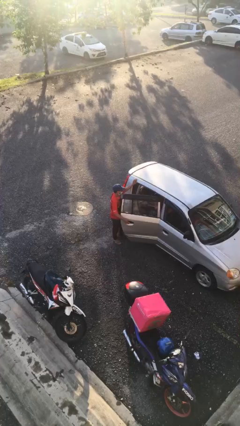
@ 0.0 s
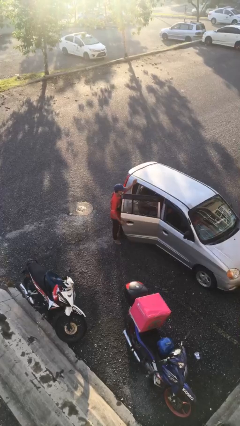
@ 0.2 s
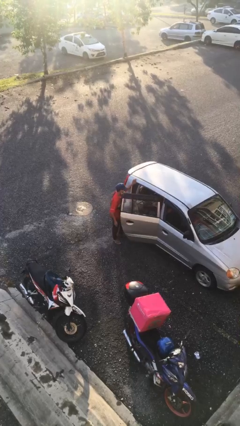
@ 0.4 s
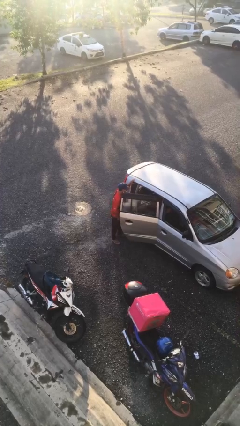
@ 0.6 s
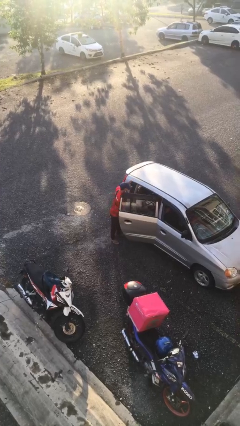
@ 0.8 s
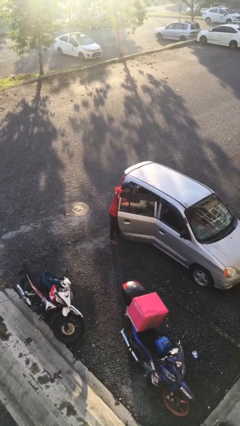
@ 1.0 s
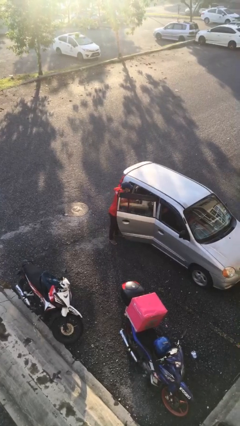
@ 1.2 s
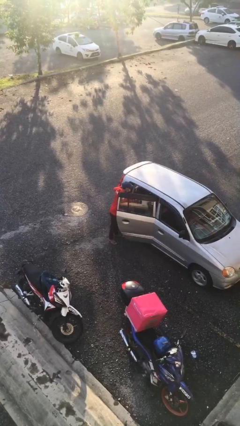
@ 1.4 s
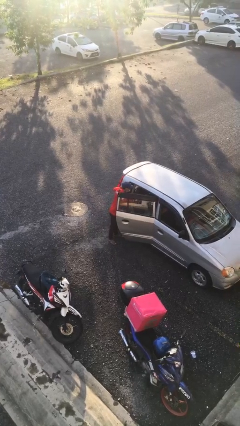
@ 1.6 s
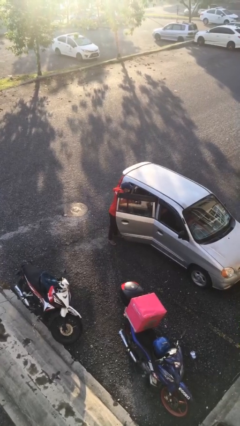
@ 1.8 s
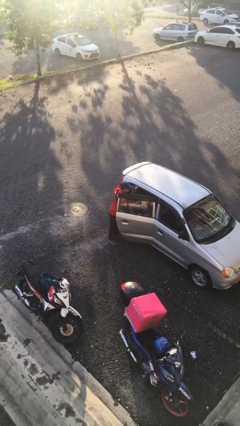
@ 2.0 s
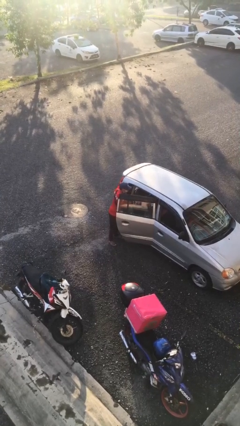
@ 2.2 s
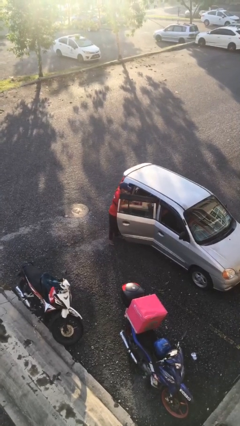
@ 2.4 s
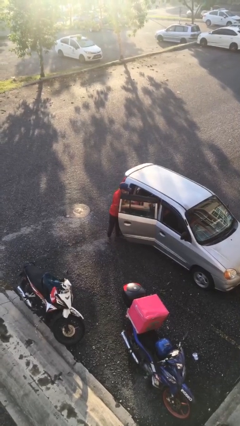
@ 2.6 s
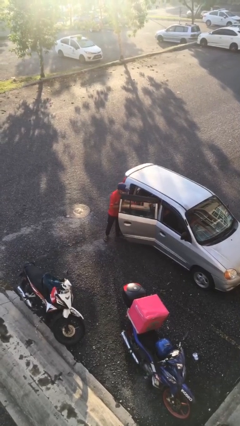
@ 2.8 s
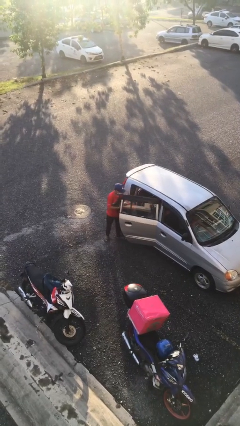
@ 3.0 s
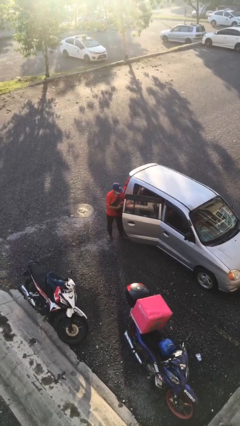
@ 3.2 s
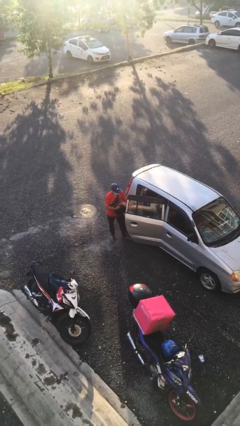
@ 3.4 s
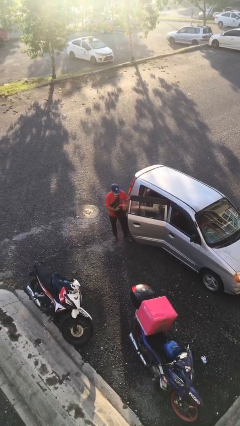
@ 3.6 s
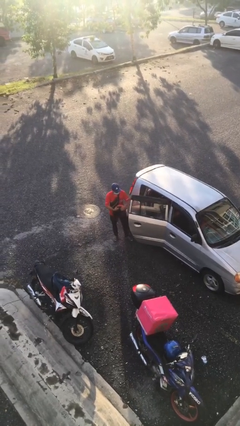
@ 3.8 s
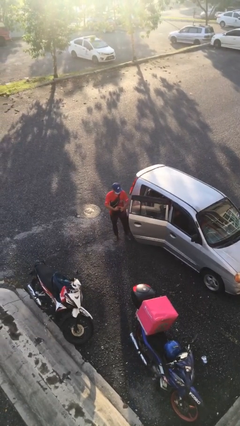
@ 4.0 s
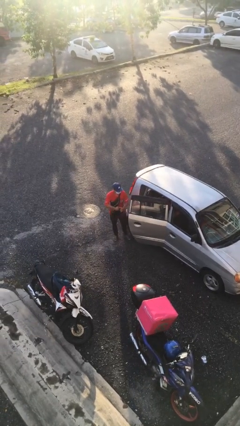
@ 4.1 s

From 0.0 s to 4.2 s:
person unloads car

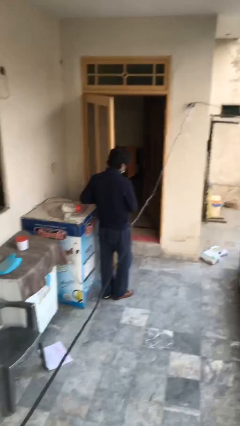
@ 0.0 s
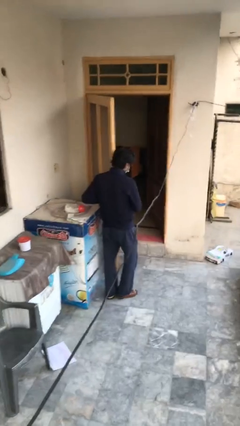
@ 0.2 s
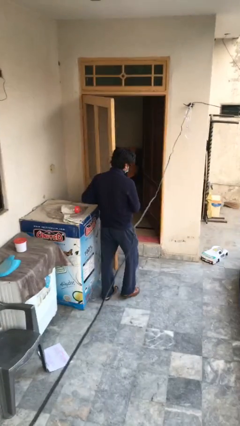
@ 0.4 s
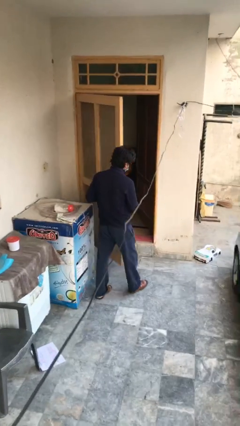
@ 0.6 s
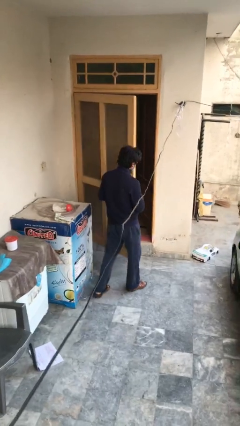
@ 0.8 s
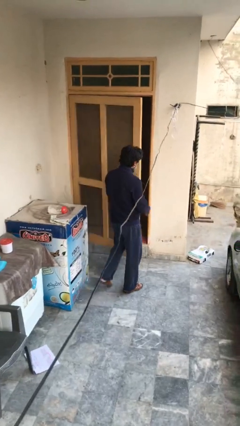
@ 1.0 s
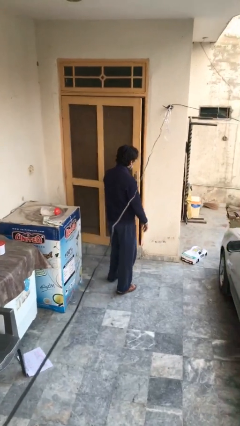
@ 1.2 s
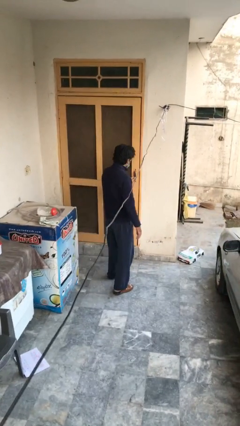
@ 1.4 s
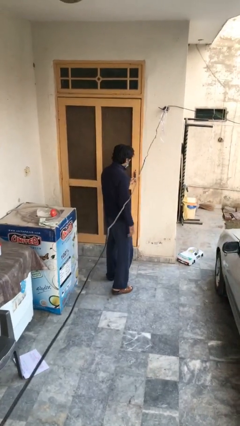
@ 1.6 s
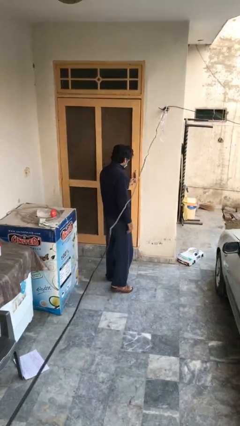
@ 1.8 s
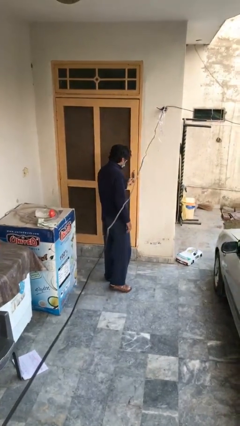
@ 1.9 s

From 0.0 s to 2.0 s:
person closes facility door

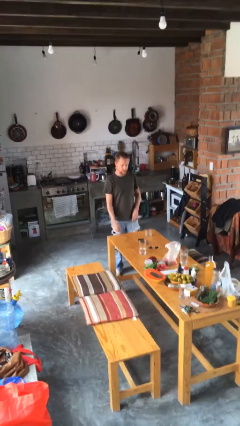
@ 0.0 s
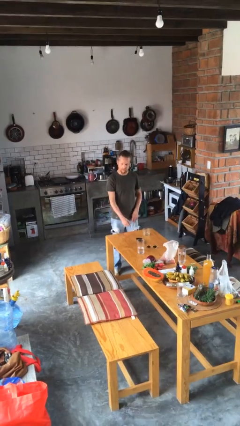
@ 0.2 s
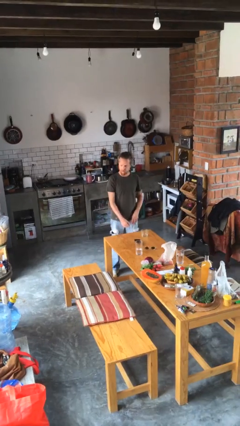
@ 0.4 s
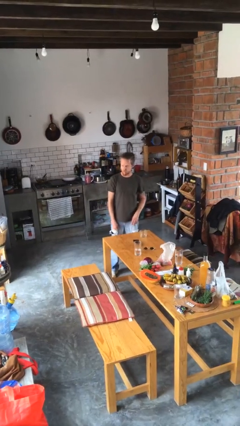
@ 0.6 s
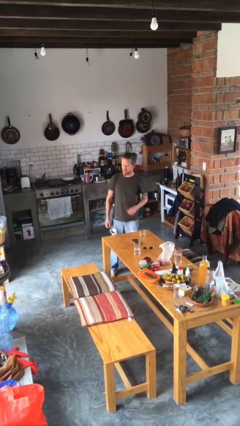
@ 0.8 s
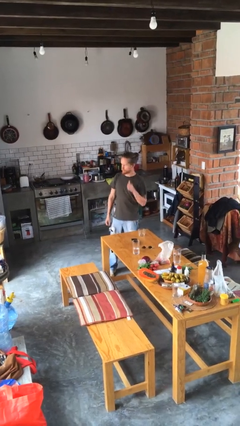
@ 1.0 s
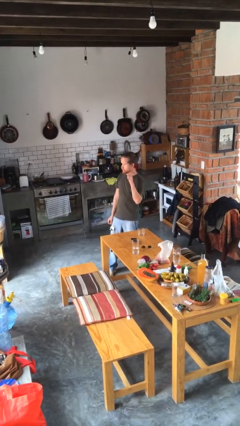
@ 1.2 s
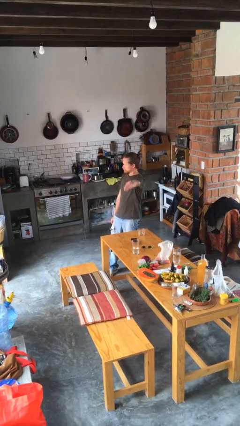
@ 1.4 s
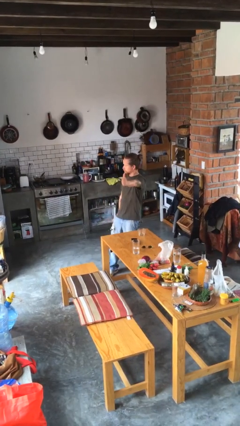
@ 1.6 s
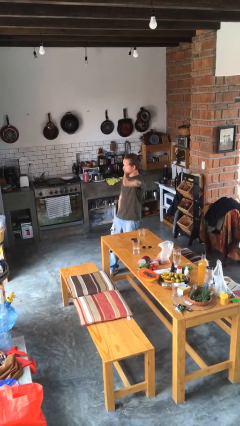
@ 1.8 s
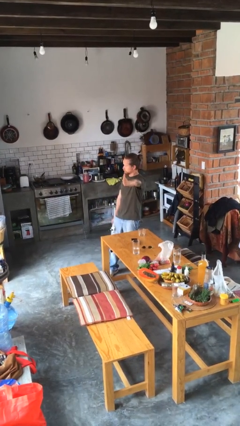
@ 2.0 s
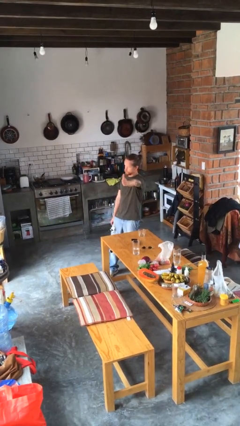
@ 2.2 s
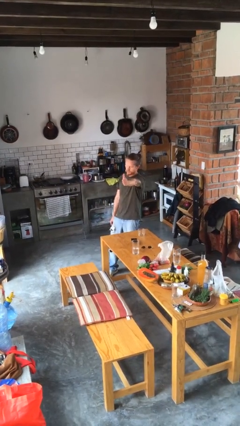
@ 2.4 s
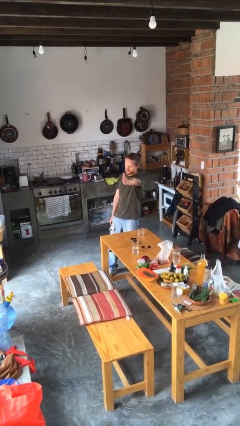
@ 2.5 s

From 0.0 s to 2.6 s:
person gestures thumbs up

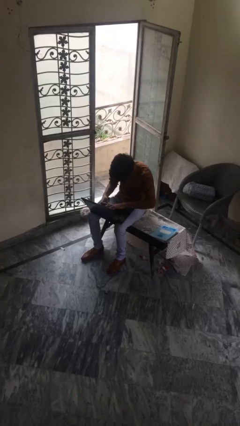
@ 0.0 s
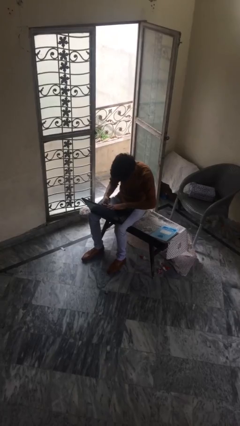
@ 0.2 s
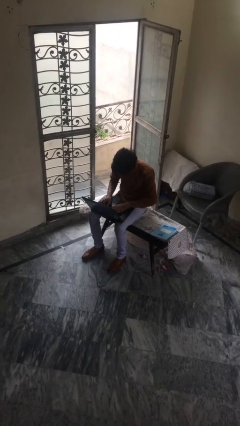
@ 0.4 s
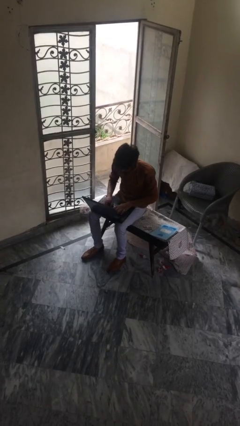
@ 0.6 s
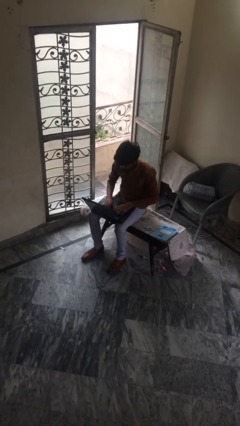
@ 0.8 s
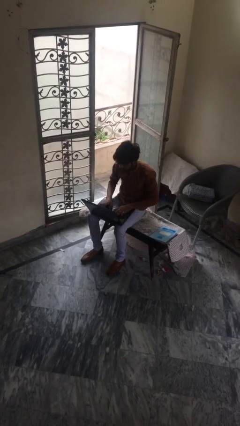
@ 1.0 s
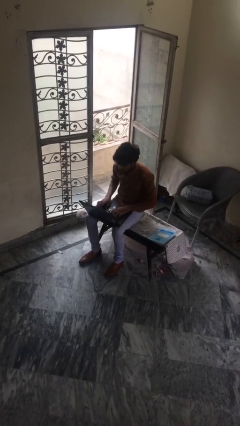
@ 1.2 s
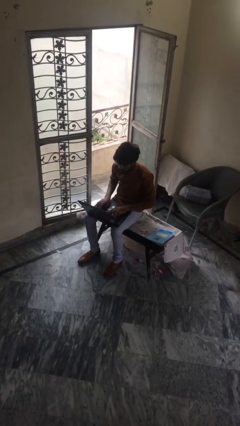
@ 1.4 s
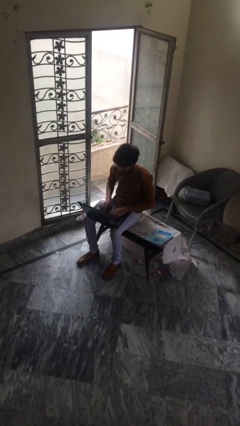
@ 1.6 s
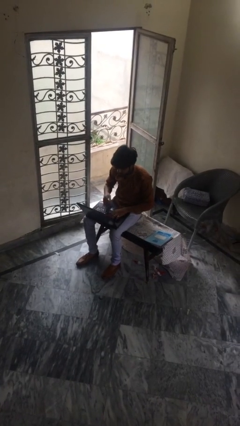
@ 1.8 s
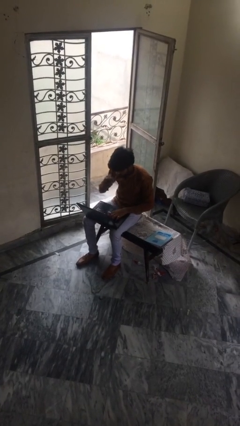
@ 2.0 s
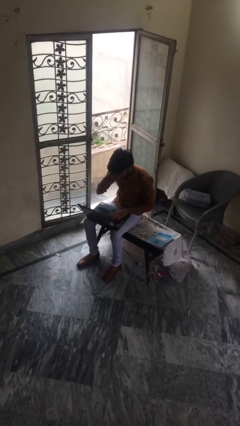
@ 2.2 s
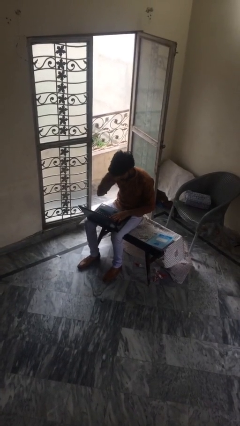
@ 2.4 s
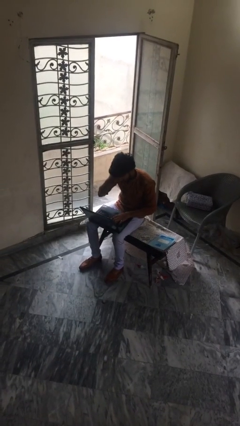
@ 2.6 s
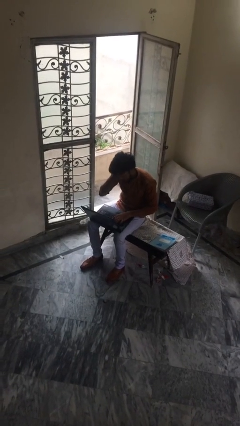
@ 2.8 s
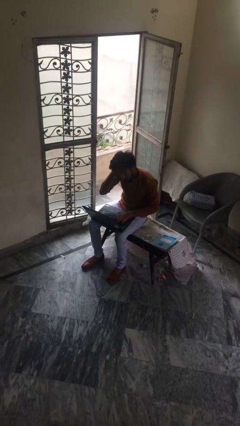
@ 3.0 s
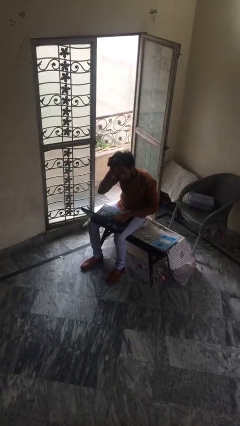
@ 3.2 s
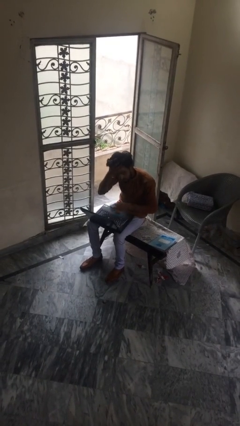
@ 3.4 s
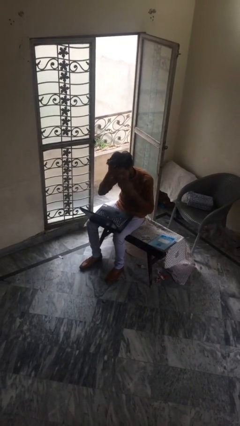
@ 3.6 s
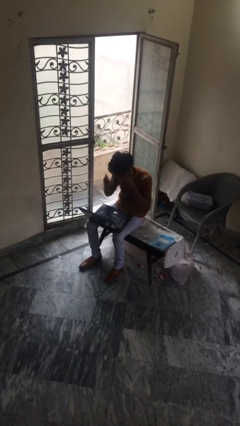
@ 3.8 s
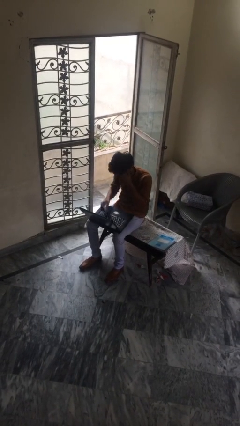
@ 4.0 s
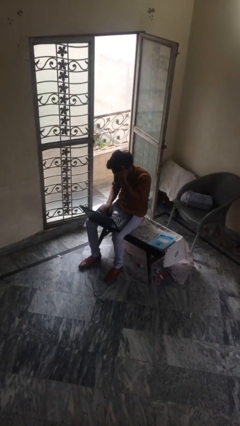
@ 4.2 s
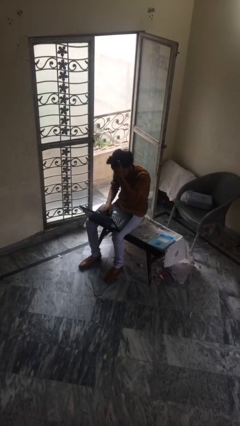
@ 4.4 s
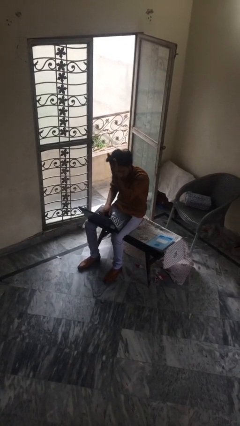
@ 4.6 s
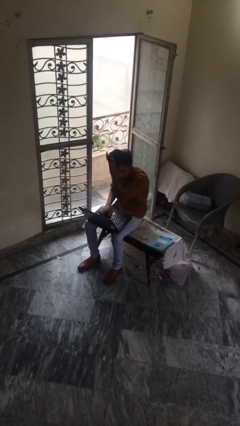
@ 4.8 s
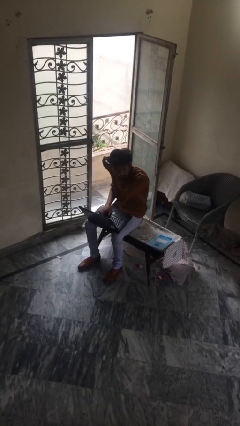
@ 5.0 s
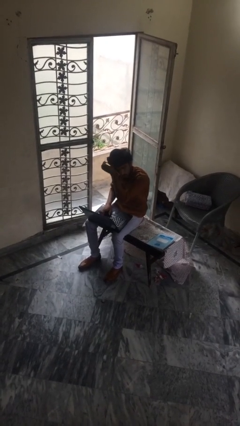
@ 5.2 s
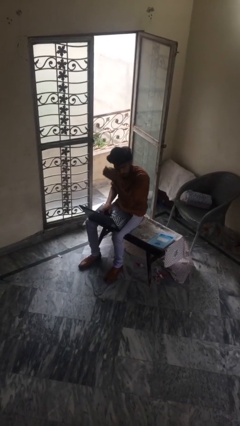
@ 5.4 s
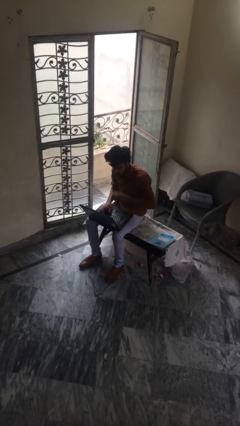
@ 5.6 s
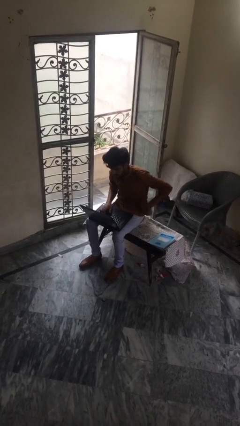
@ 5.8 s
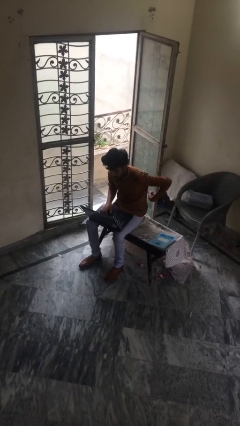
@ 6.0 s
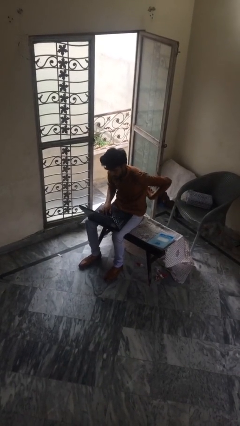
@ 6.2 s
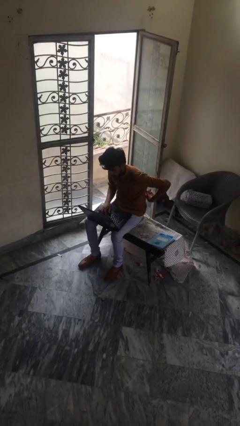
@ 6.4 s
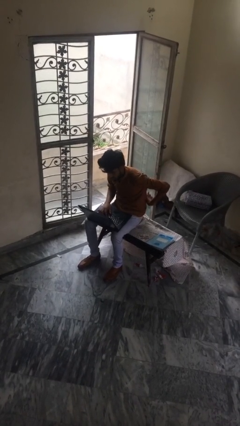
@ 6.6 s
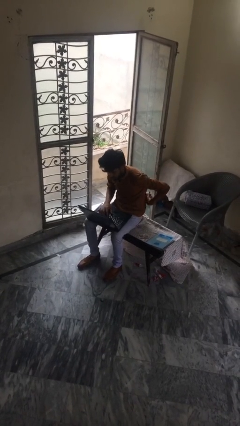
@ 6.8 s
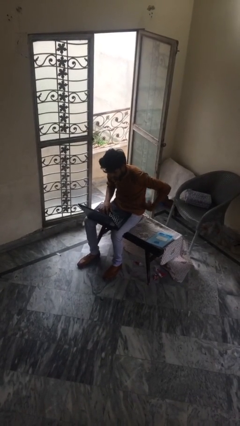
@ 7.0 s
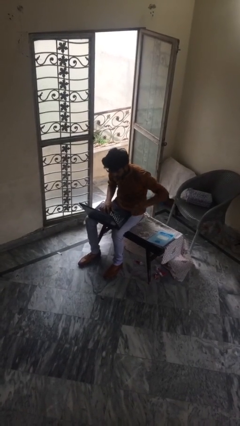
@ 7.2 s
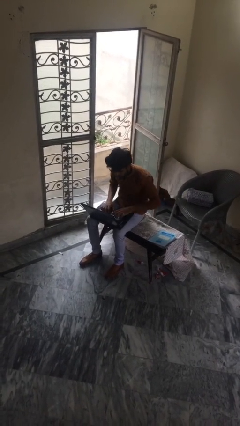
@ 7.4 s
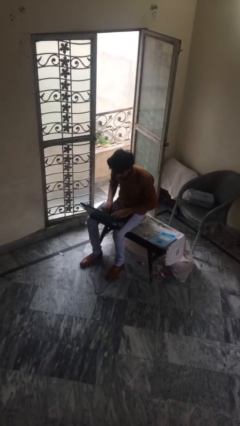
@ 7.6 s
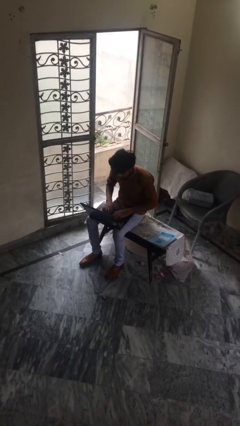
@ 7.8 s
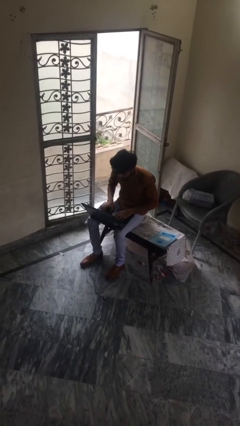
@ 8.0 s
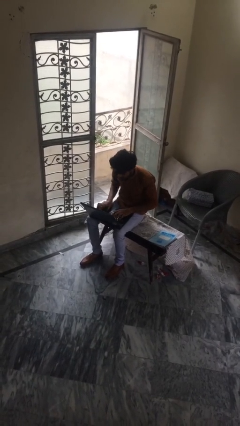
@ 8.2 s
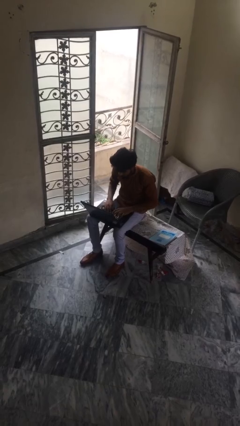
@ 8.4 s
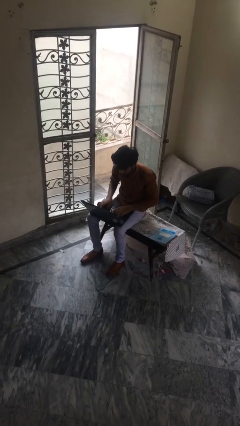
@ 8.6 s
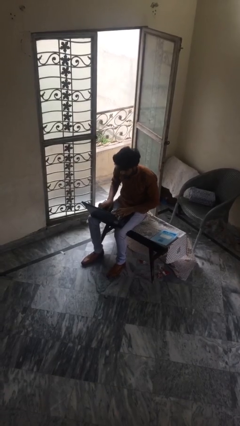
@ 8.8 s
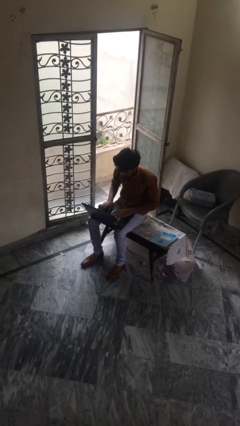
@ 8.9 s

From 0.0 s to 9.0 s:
person interacts with laptop
